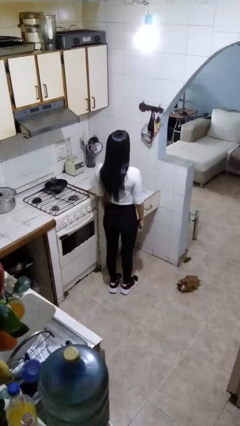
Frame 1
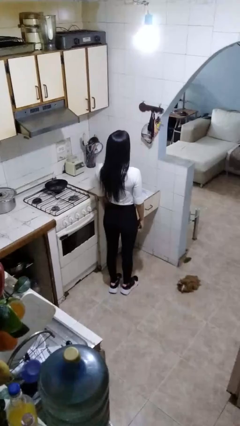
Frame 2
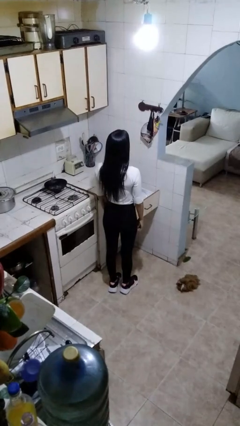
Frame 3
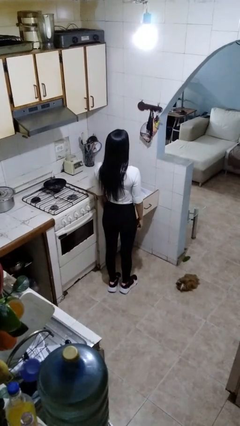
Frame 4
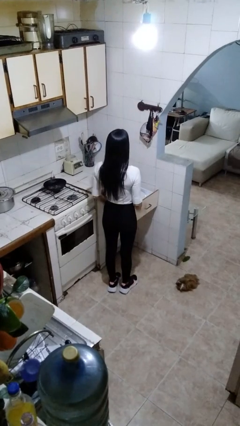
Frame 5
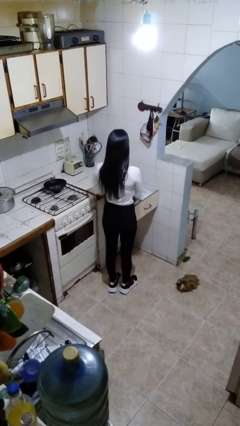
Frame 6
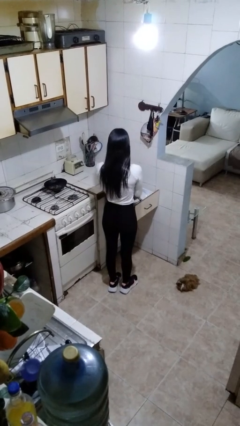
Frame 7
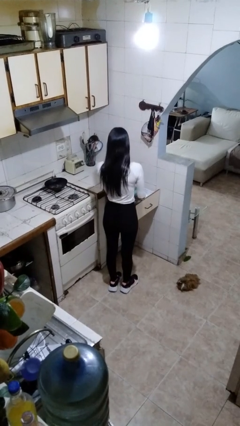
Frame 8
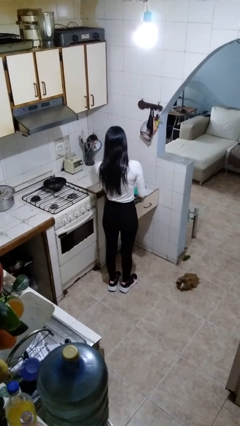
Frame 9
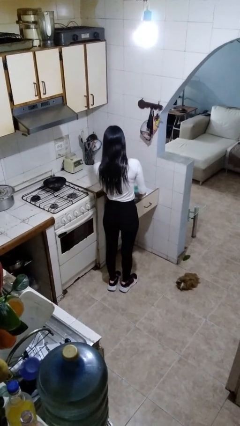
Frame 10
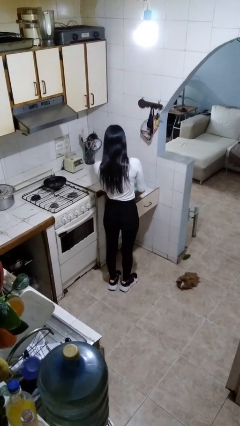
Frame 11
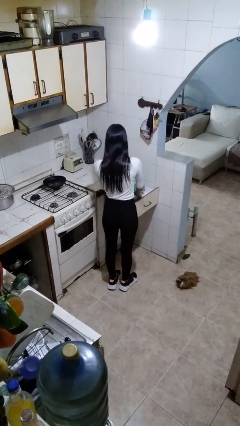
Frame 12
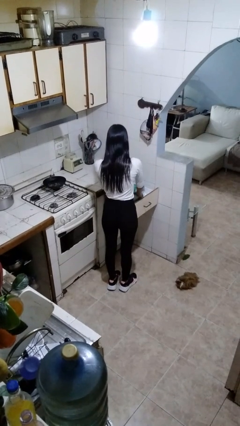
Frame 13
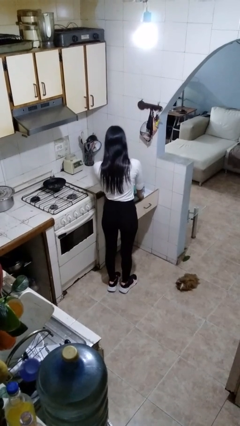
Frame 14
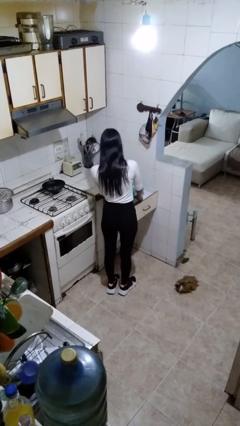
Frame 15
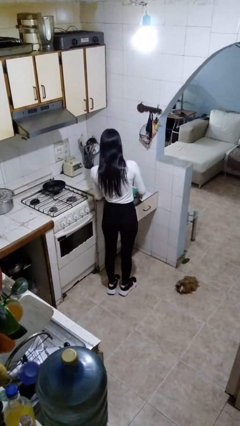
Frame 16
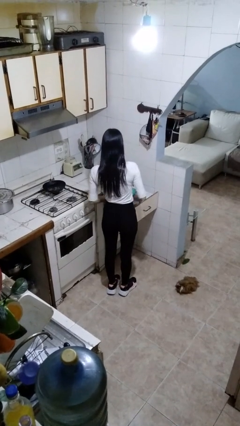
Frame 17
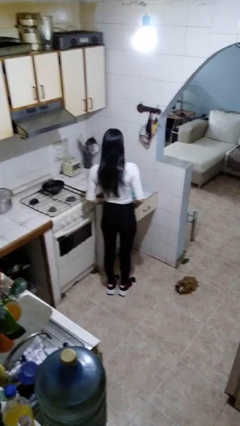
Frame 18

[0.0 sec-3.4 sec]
person searches in kitchen drawer

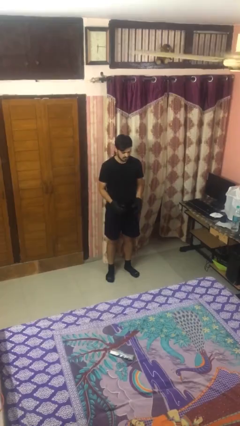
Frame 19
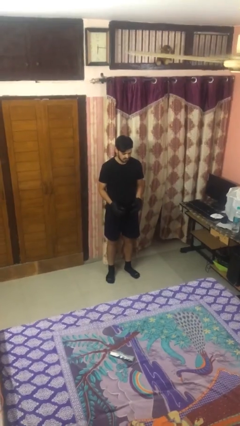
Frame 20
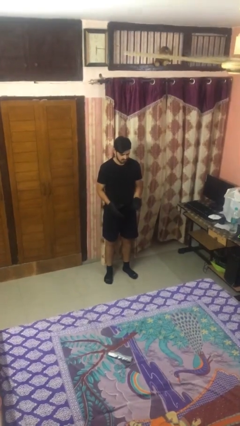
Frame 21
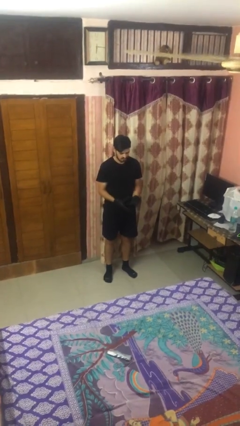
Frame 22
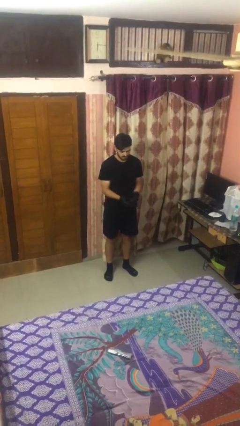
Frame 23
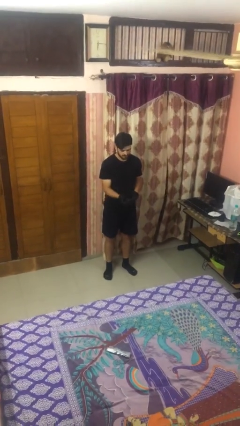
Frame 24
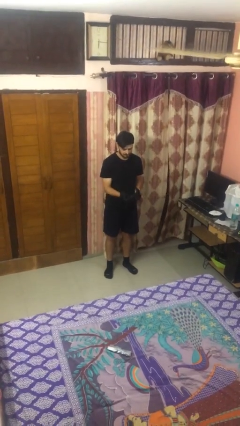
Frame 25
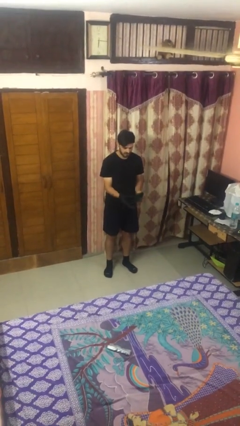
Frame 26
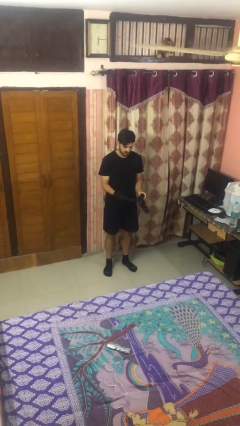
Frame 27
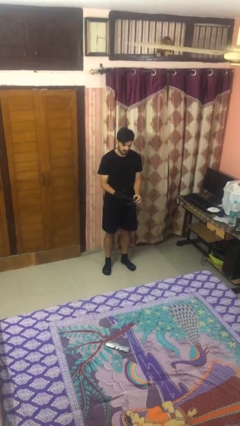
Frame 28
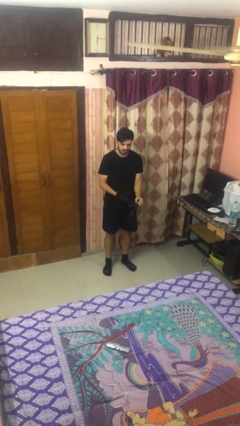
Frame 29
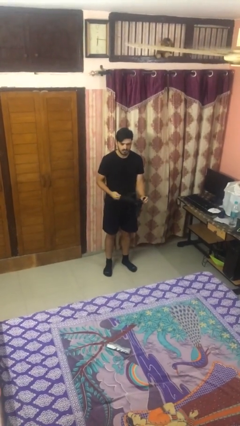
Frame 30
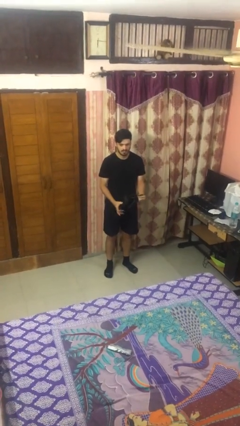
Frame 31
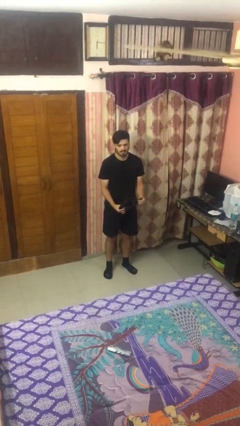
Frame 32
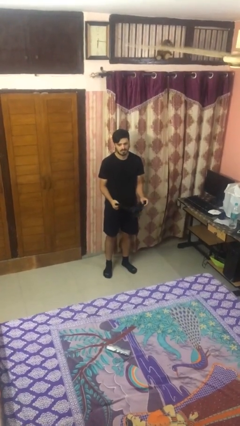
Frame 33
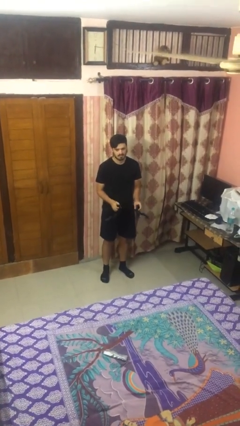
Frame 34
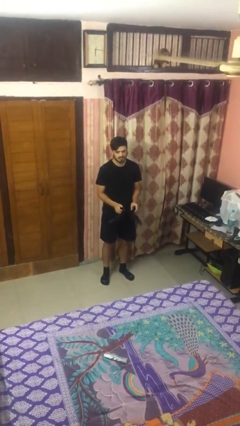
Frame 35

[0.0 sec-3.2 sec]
person takes off gloves

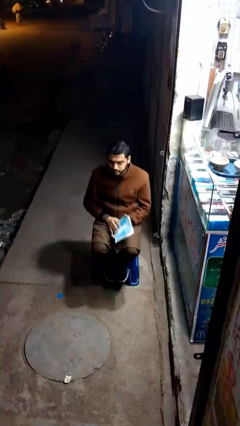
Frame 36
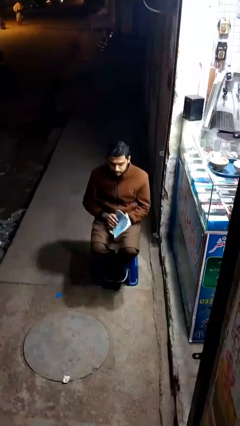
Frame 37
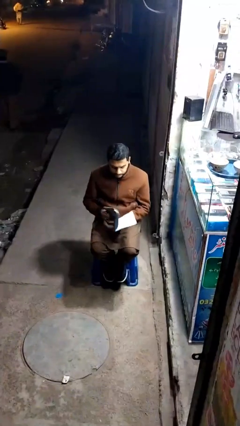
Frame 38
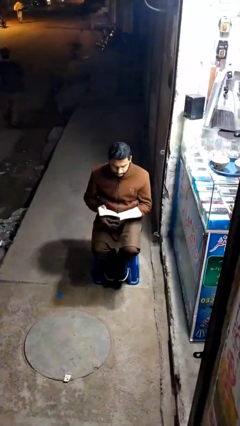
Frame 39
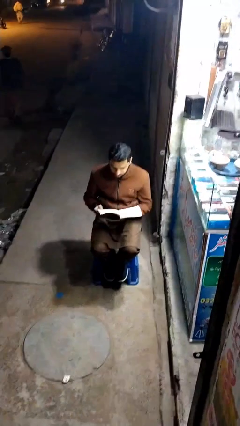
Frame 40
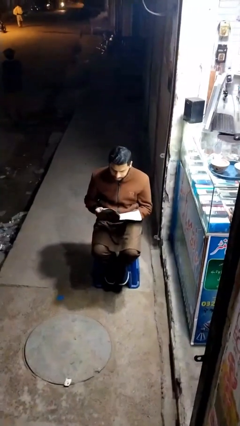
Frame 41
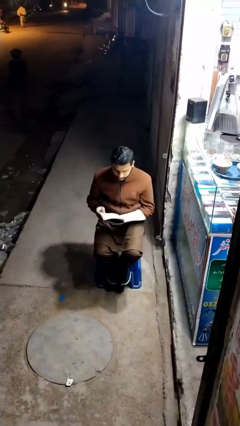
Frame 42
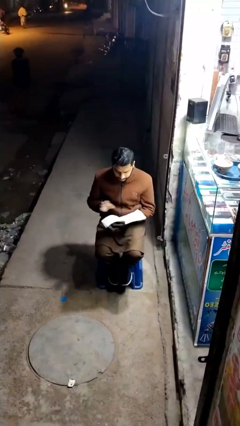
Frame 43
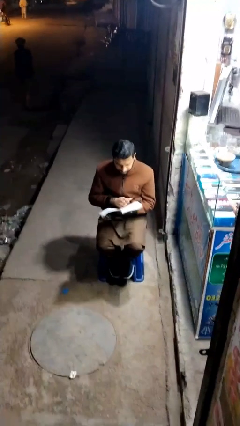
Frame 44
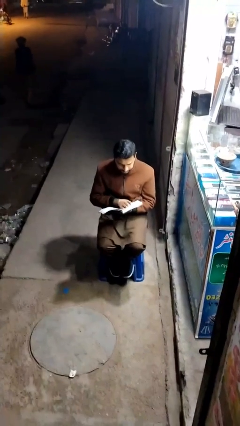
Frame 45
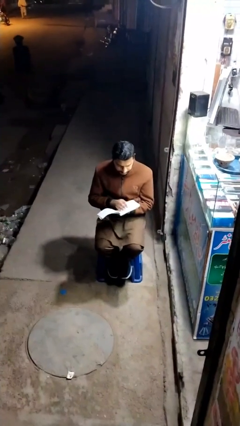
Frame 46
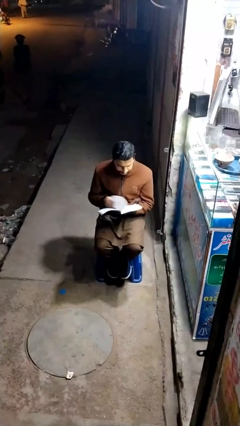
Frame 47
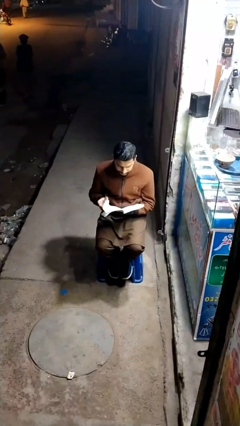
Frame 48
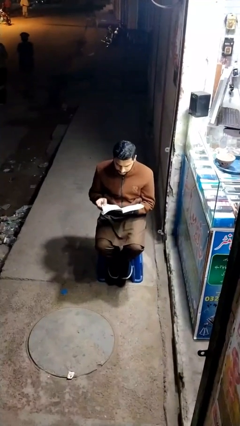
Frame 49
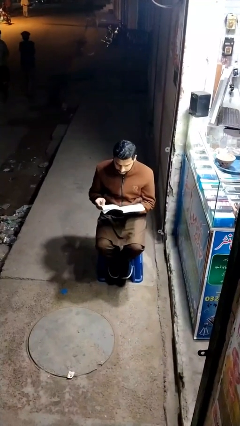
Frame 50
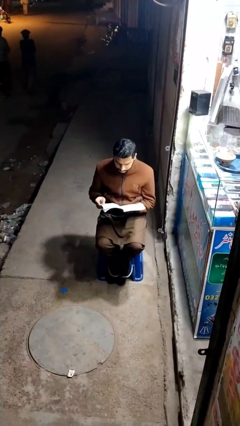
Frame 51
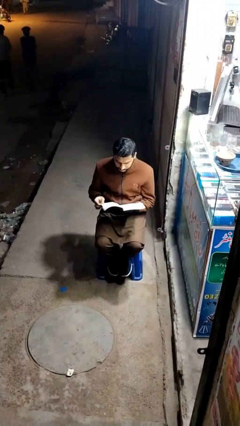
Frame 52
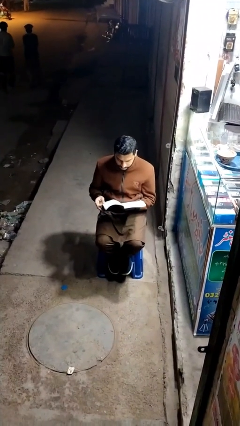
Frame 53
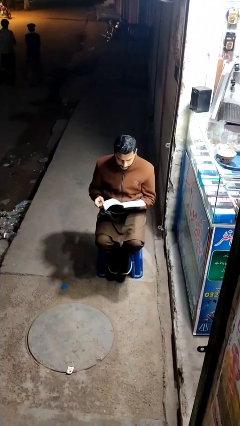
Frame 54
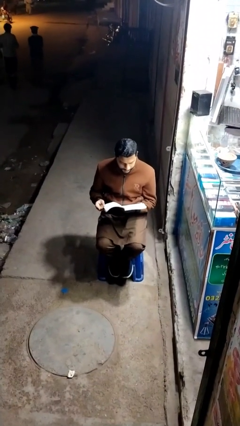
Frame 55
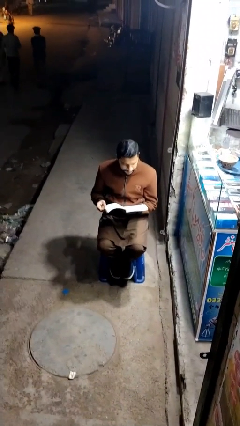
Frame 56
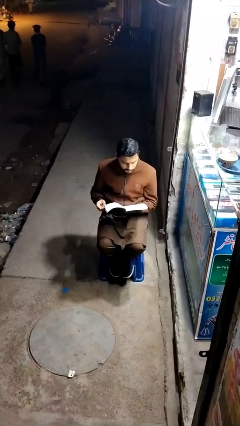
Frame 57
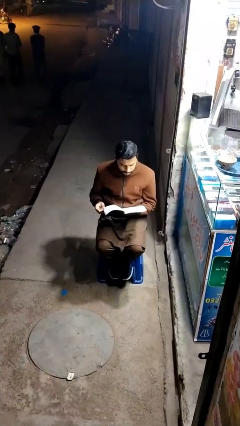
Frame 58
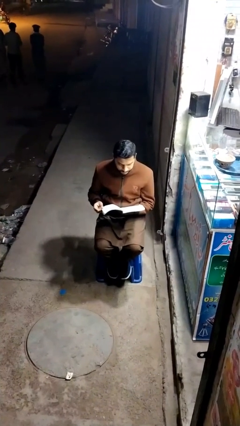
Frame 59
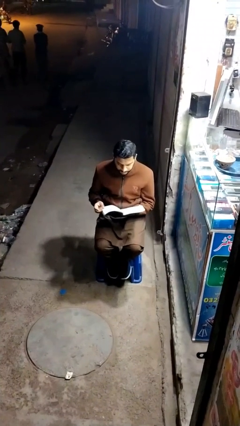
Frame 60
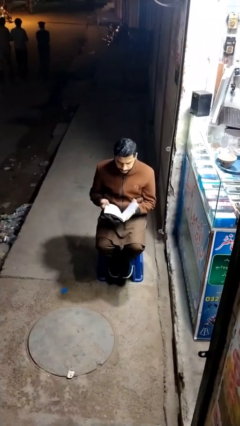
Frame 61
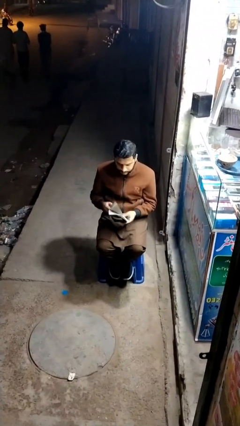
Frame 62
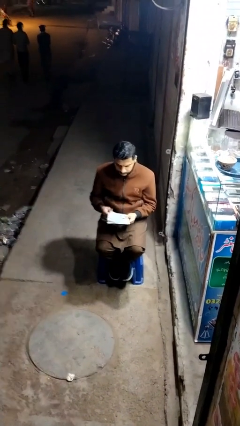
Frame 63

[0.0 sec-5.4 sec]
person interacts with laptop

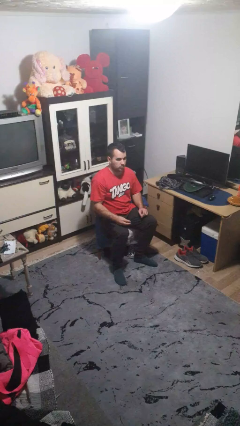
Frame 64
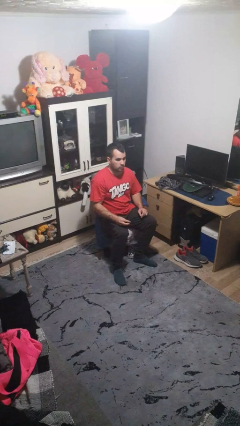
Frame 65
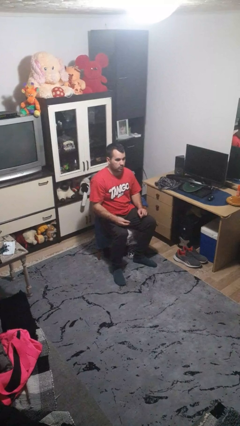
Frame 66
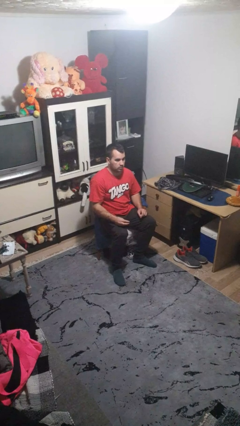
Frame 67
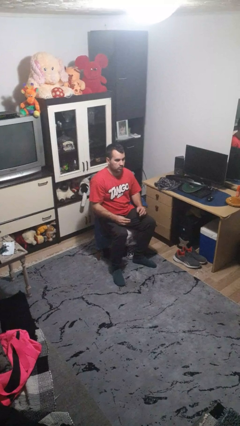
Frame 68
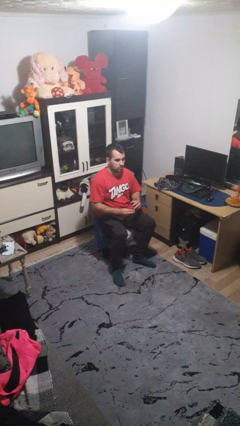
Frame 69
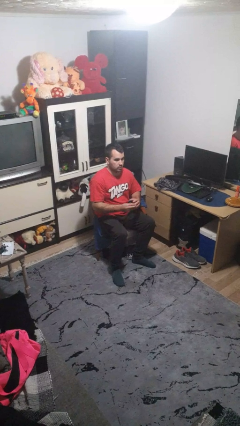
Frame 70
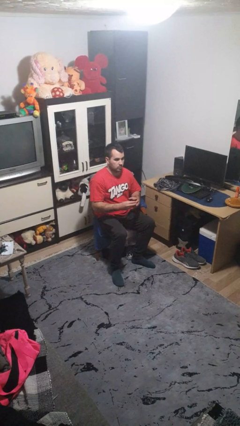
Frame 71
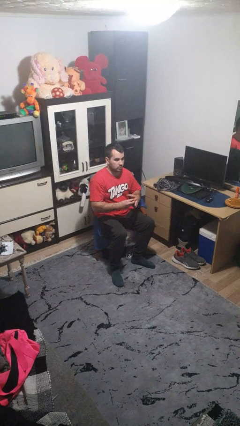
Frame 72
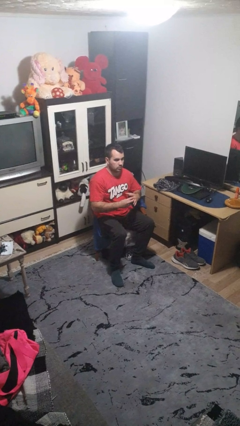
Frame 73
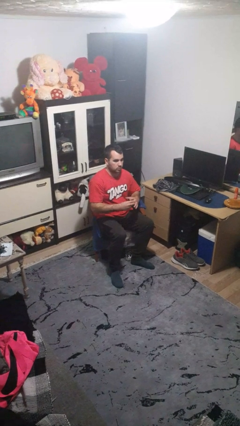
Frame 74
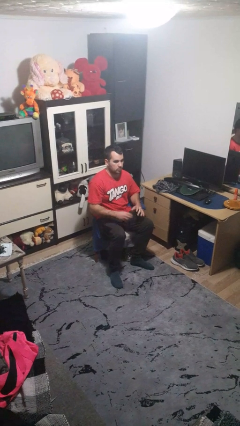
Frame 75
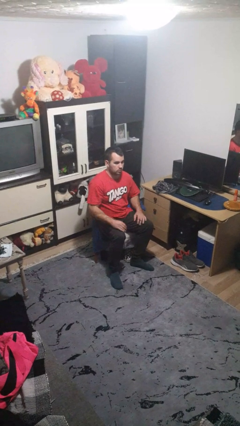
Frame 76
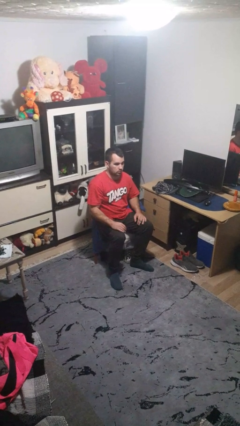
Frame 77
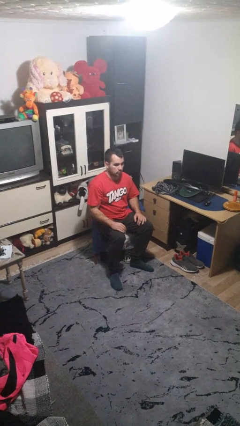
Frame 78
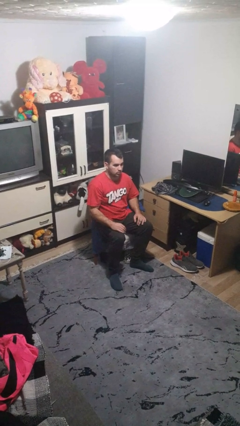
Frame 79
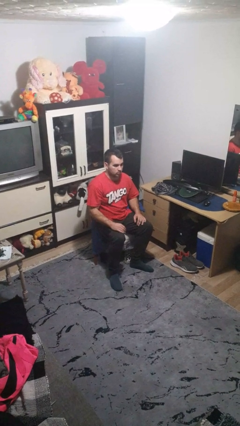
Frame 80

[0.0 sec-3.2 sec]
person puts on ring

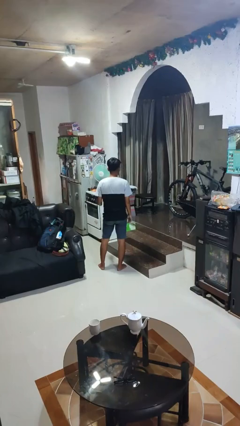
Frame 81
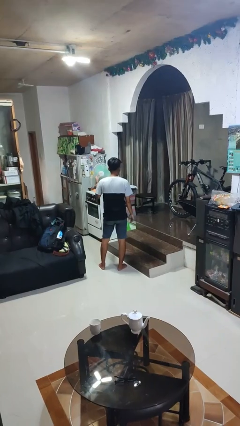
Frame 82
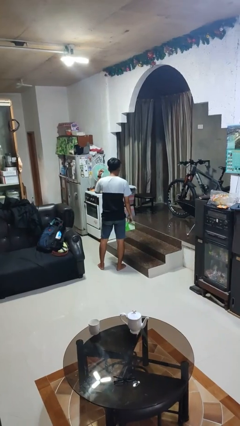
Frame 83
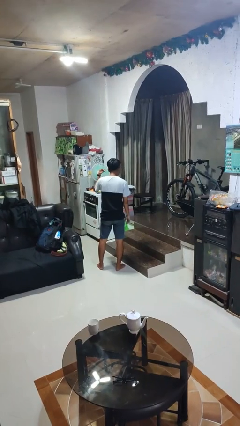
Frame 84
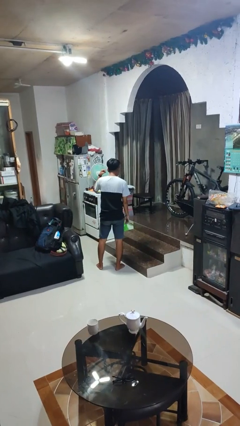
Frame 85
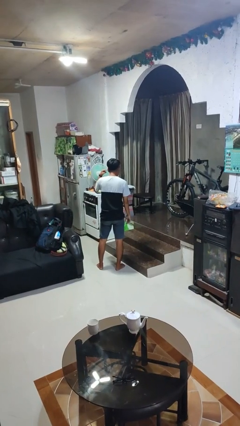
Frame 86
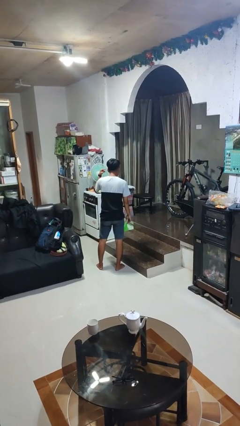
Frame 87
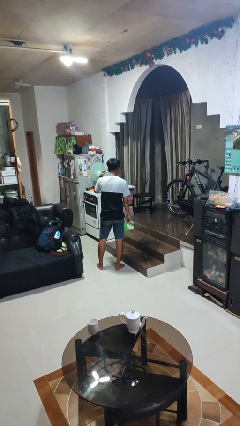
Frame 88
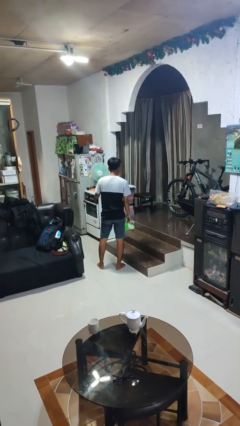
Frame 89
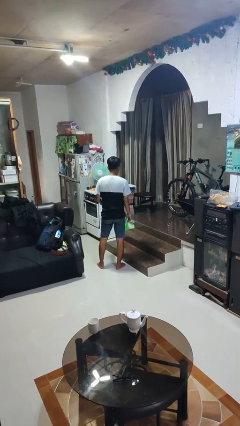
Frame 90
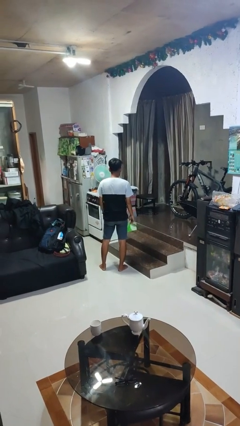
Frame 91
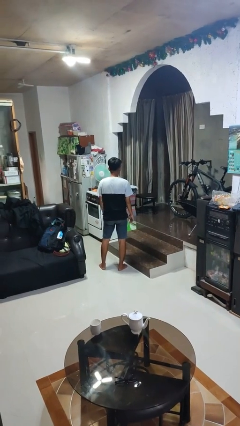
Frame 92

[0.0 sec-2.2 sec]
person gestures listen closely

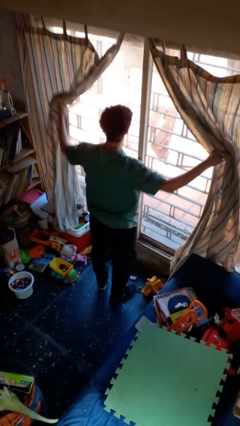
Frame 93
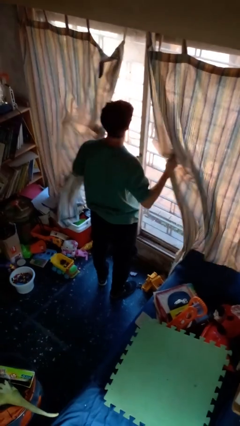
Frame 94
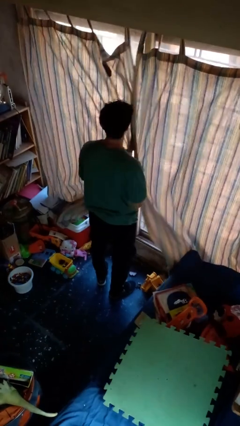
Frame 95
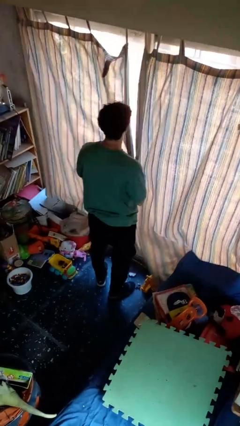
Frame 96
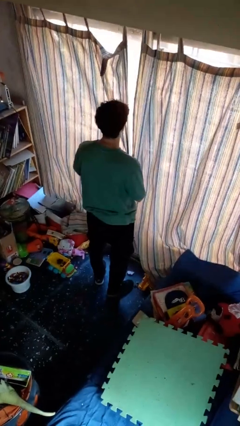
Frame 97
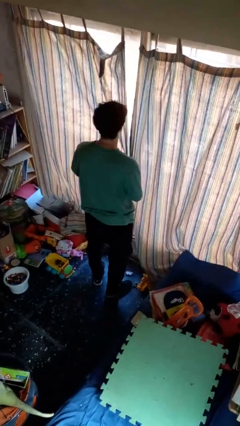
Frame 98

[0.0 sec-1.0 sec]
person closes curtains
